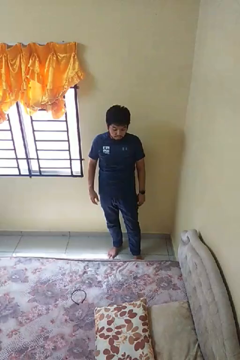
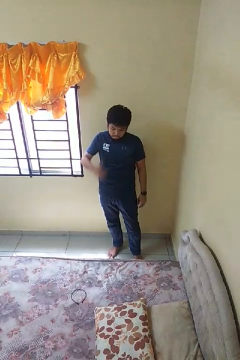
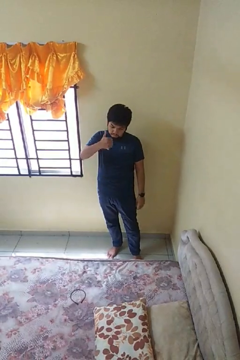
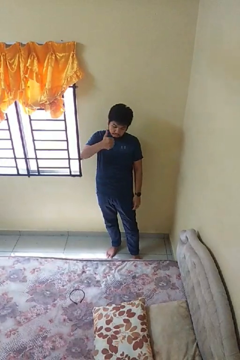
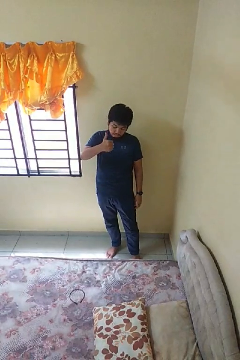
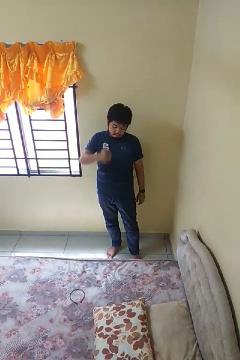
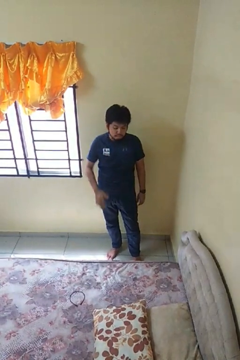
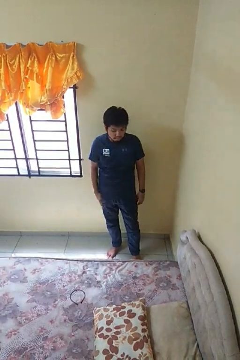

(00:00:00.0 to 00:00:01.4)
person gestures thumbs up

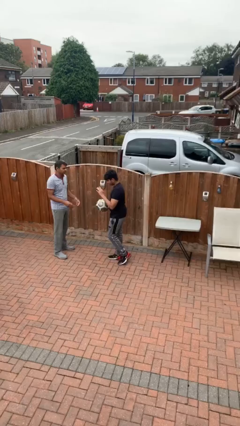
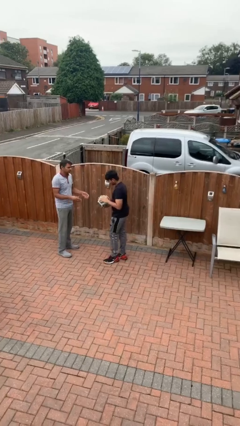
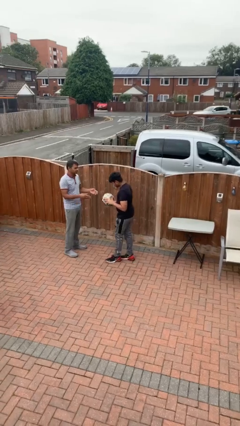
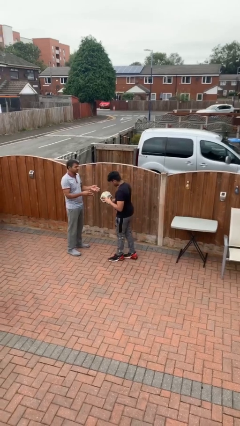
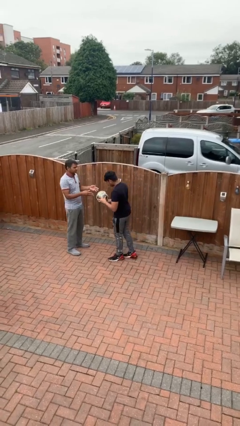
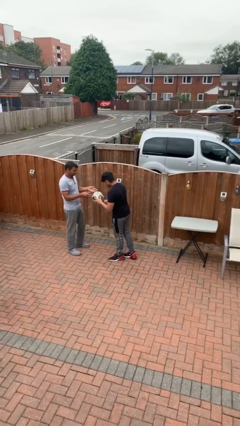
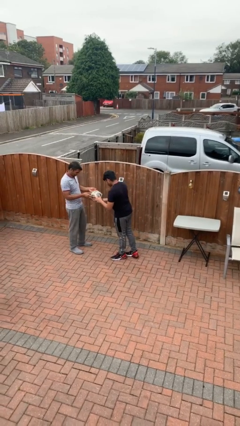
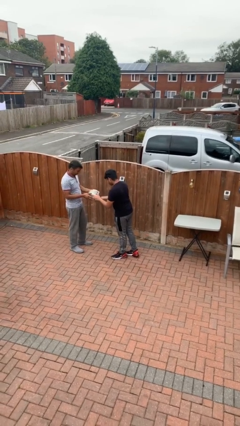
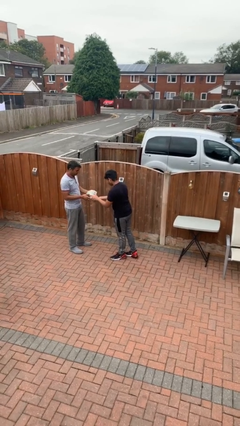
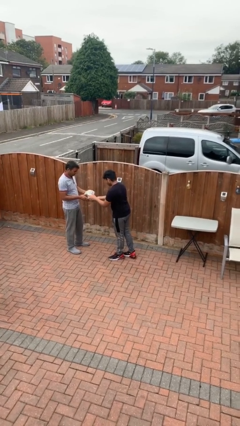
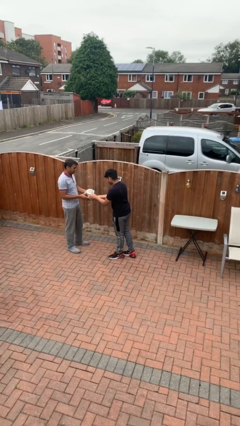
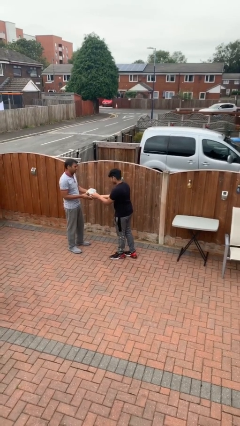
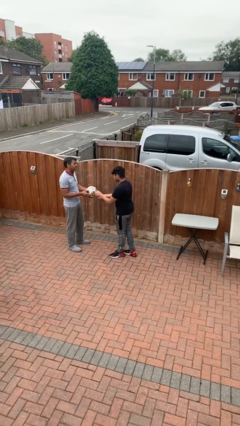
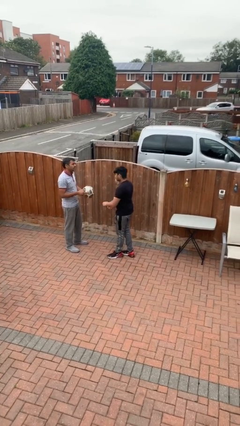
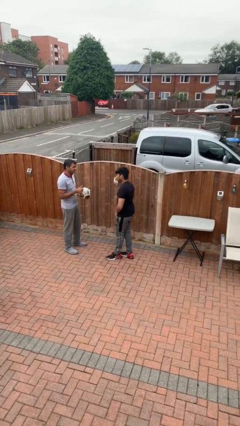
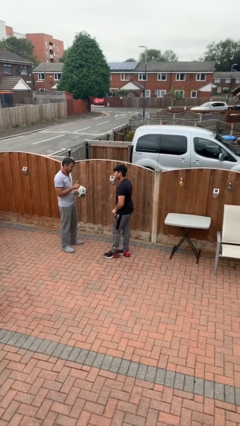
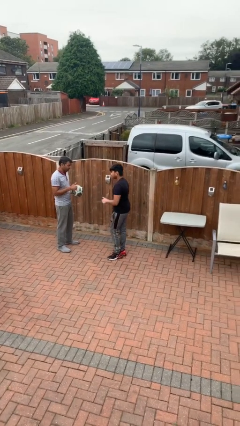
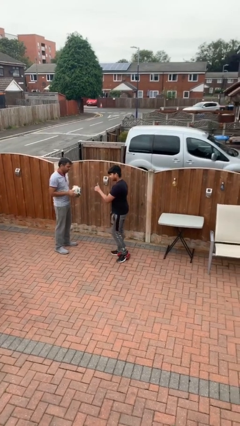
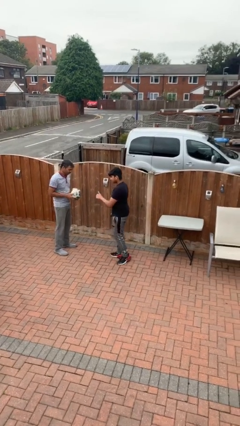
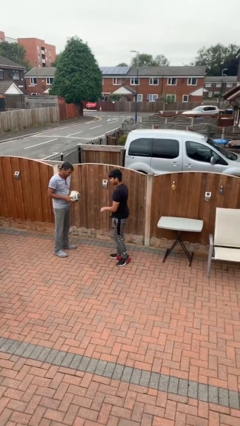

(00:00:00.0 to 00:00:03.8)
person transfers object to person

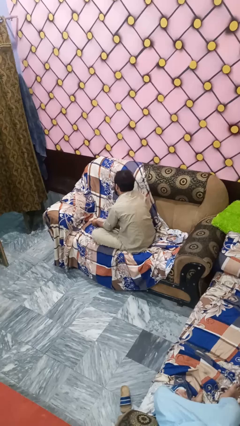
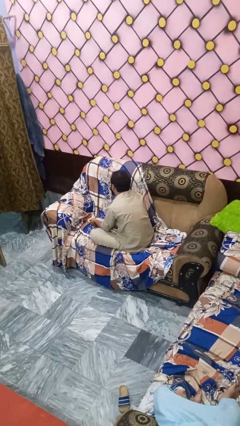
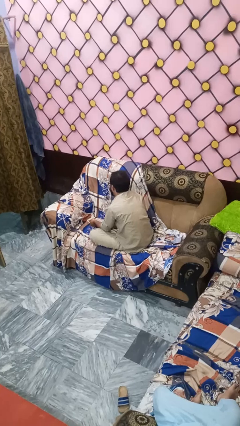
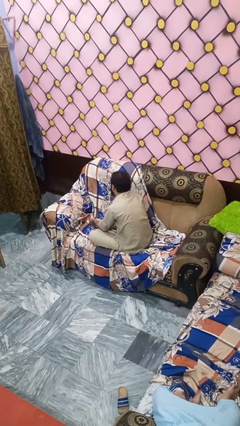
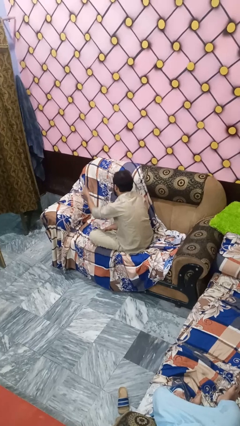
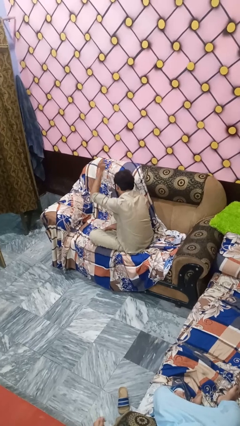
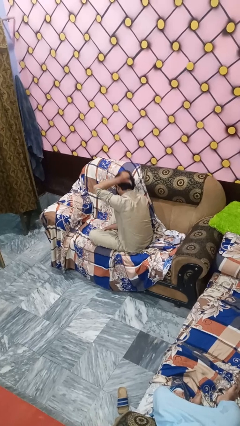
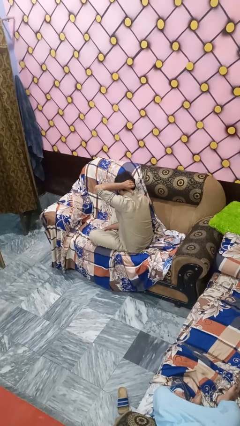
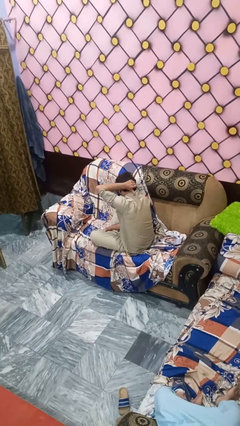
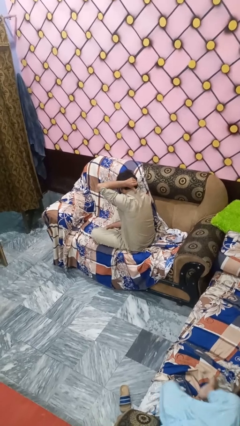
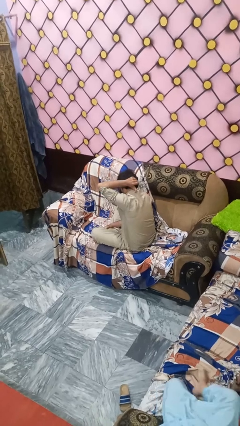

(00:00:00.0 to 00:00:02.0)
person gestures behind me

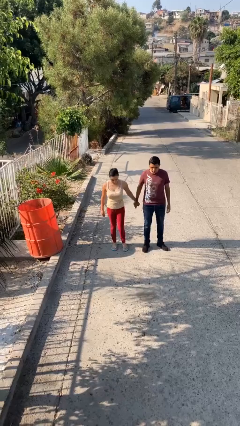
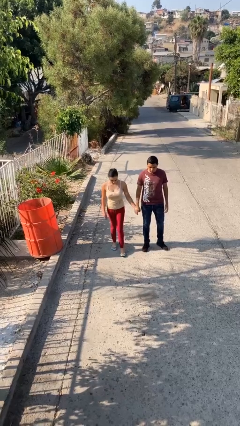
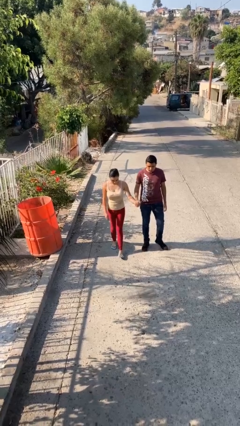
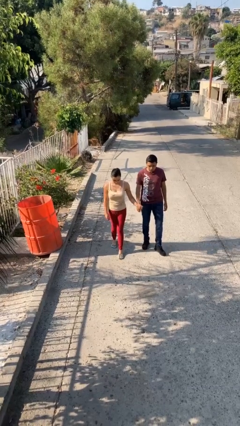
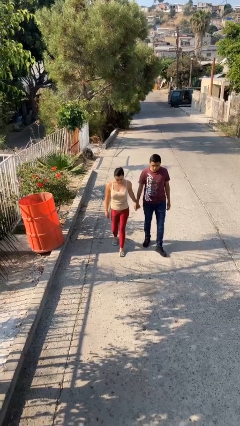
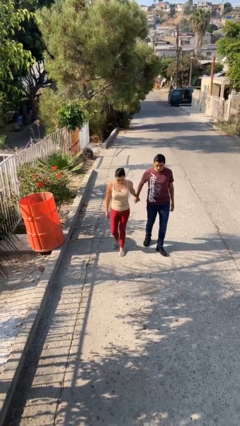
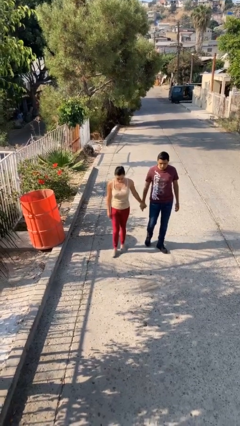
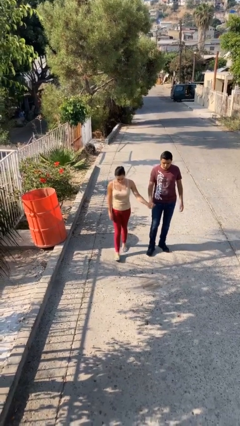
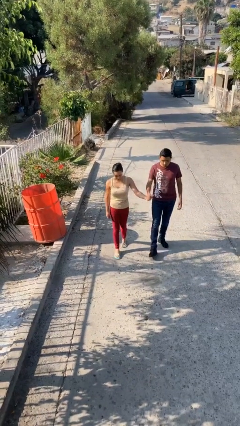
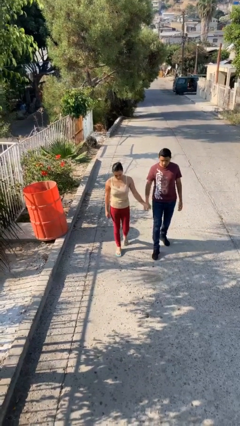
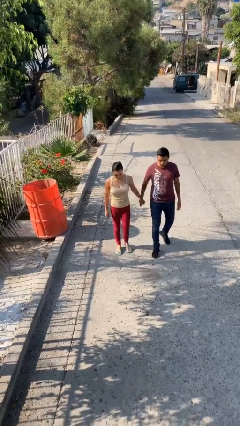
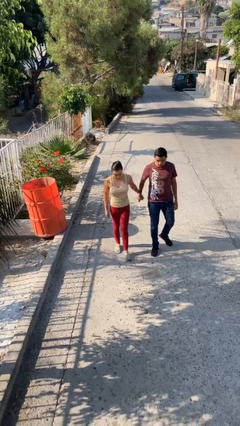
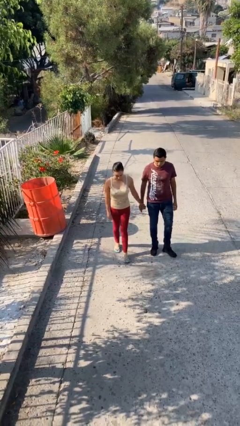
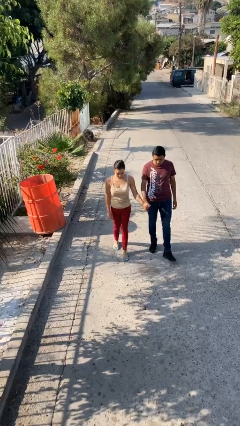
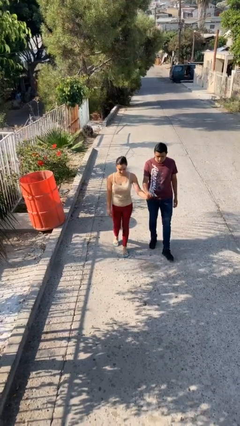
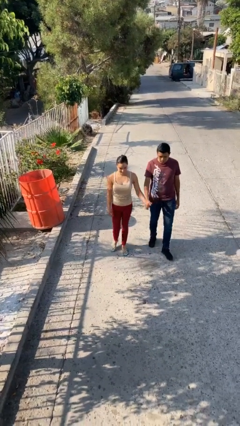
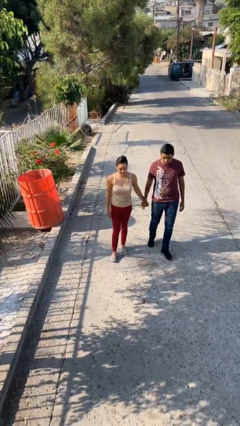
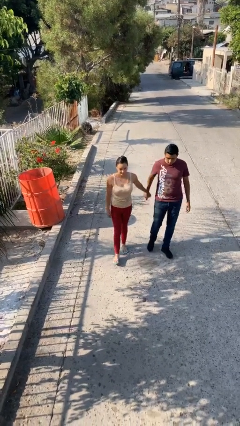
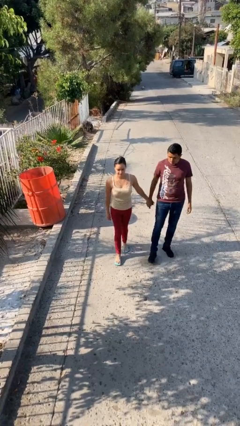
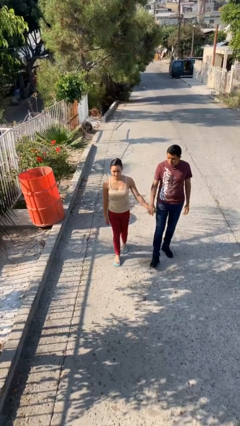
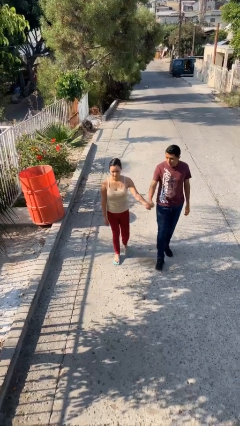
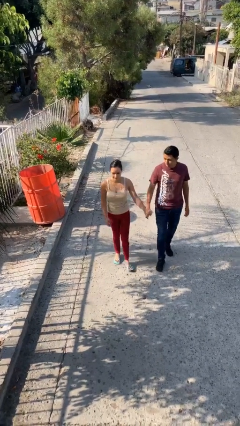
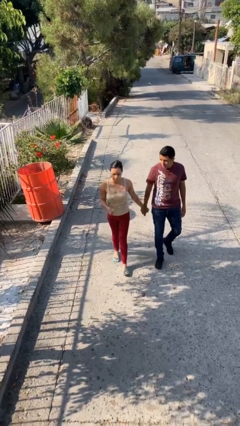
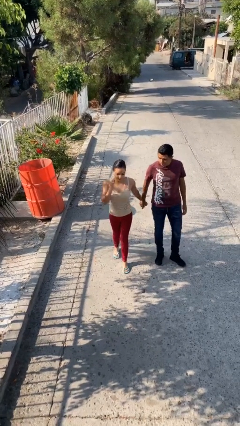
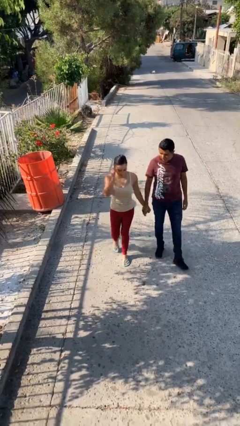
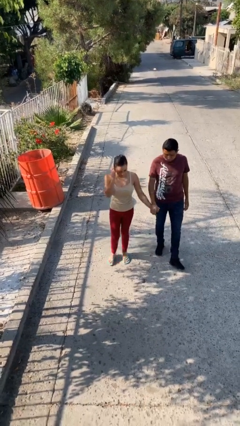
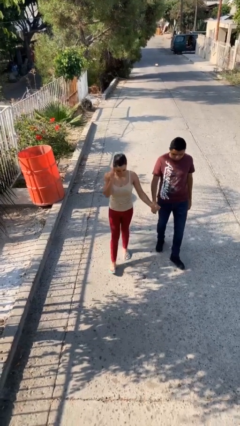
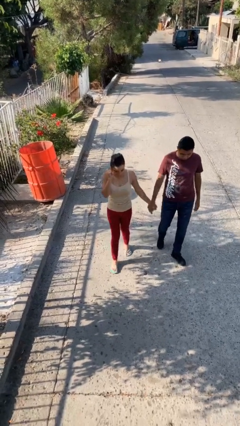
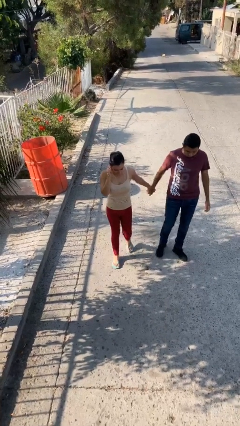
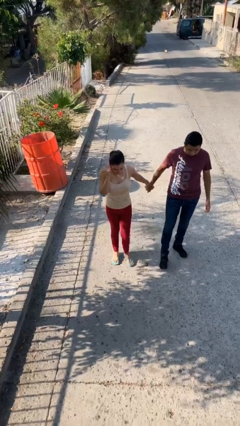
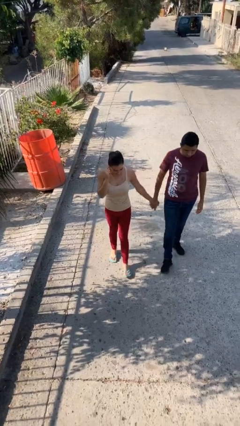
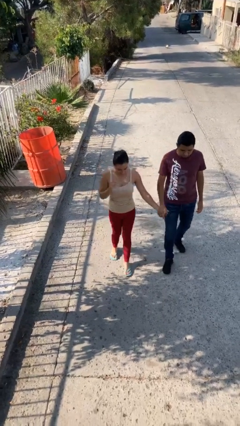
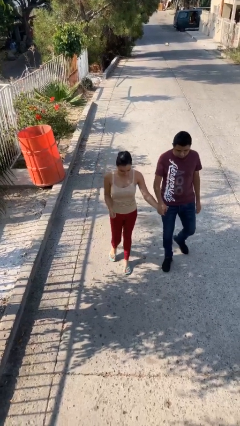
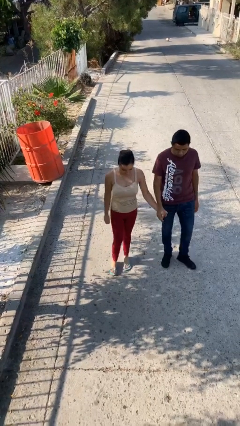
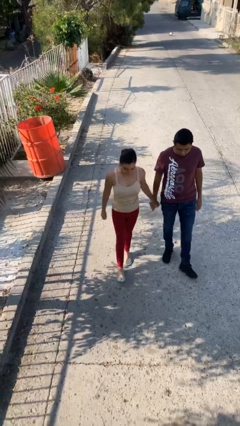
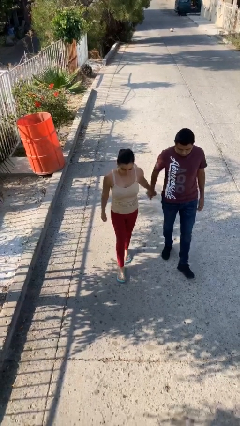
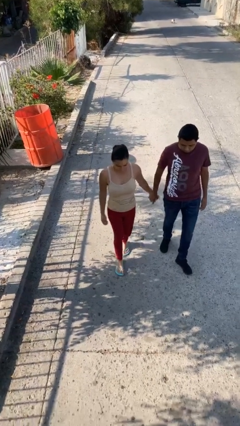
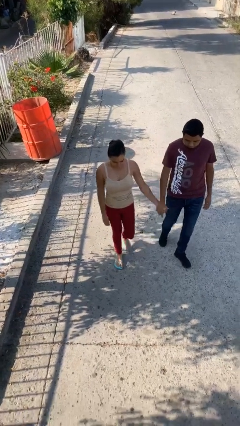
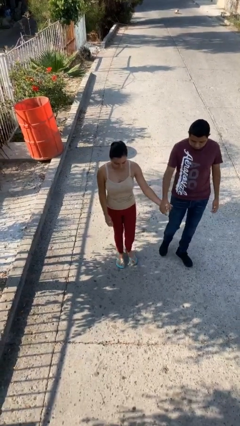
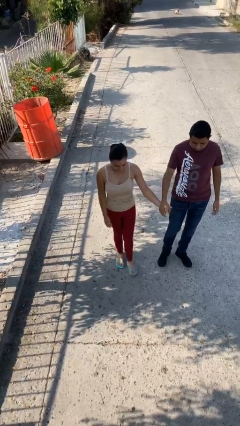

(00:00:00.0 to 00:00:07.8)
person holds hand

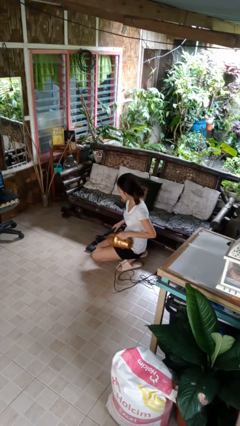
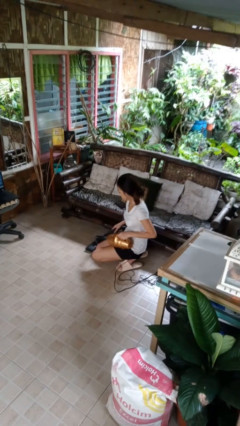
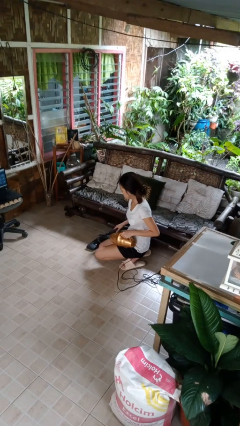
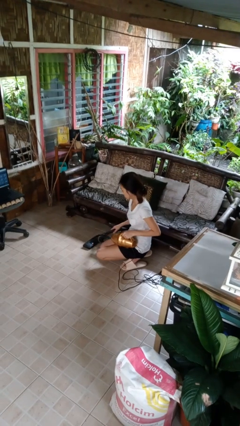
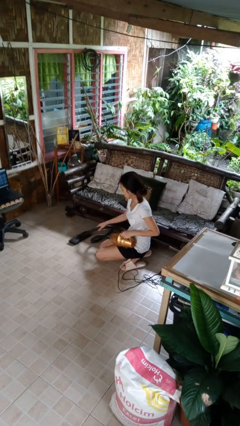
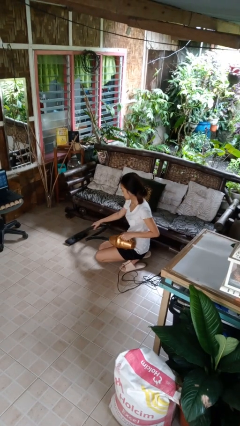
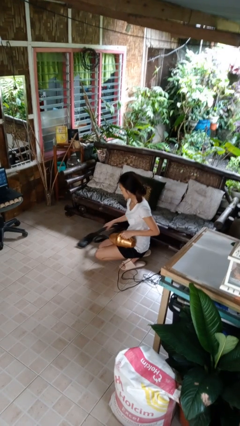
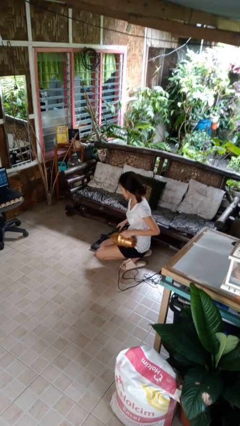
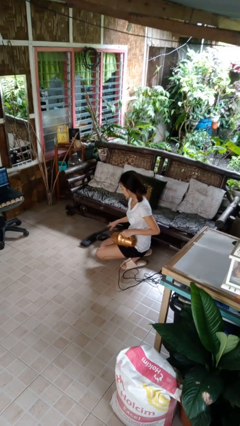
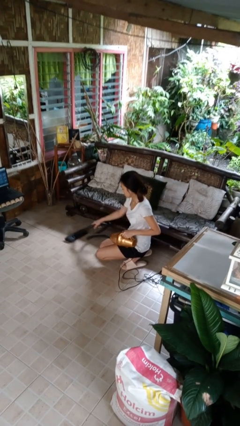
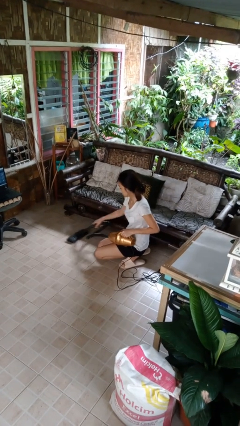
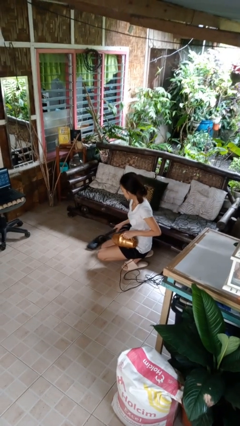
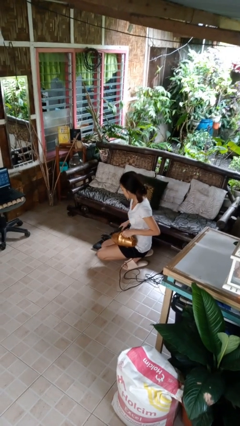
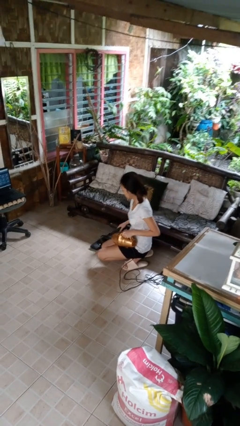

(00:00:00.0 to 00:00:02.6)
person vacuums carpet

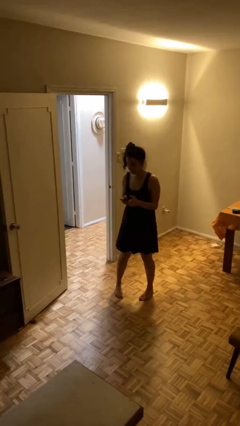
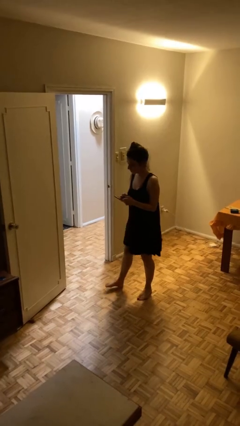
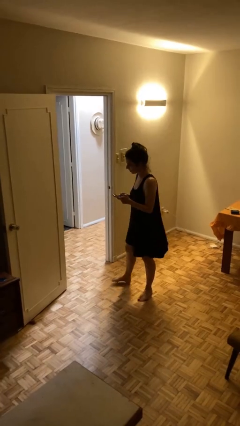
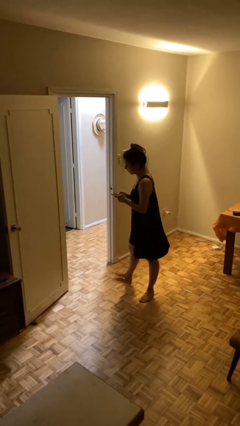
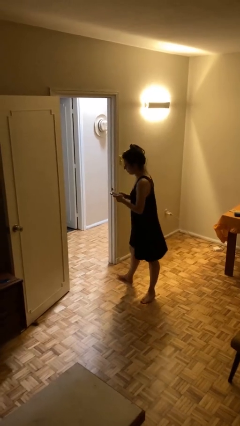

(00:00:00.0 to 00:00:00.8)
person enters scene through structure
